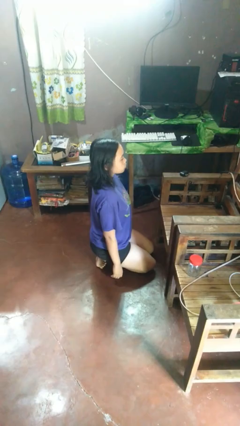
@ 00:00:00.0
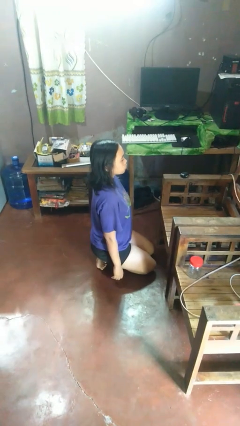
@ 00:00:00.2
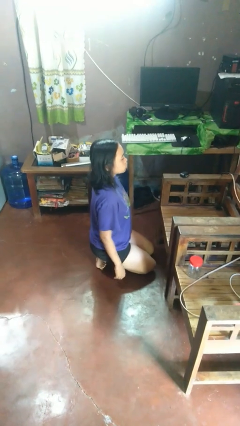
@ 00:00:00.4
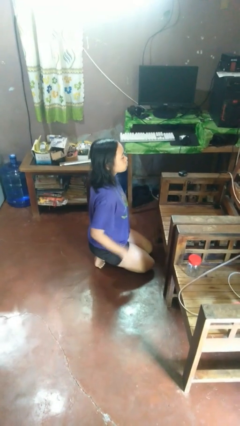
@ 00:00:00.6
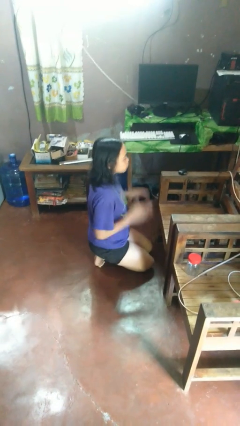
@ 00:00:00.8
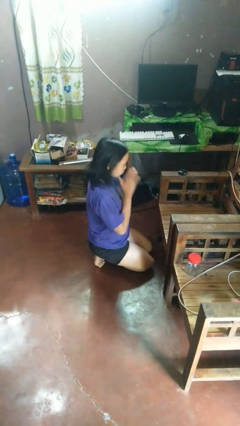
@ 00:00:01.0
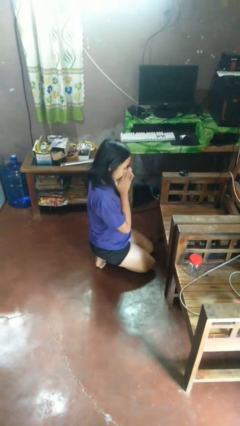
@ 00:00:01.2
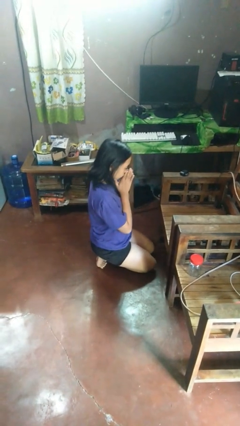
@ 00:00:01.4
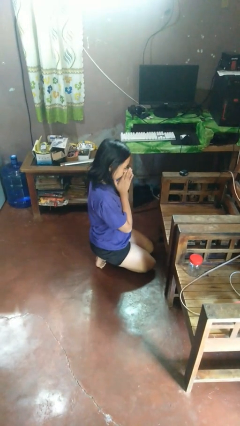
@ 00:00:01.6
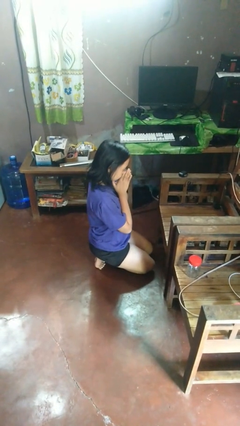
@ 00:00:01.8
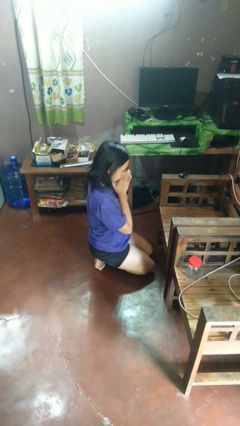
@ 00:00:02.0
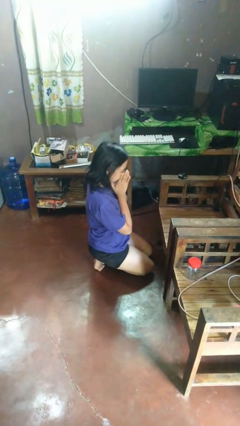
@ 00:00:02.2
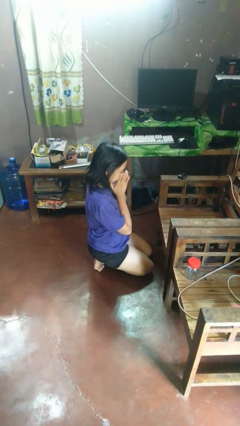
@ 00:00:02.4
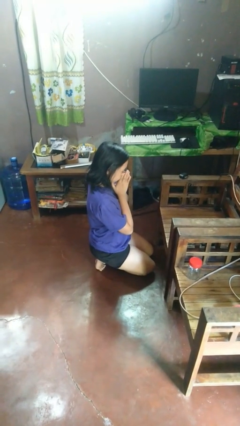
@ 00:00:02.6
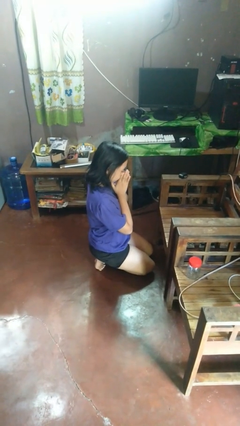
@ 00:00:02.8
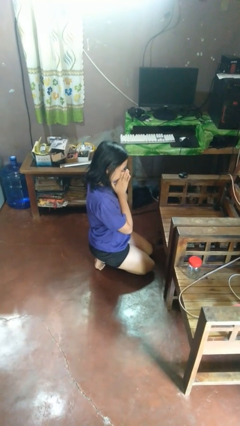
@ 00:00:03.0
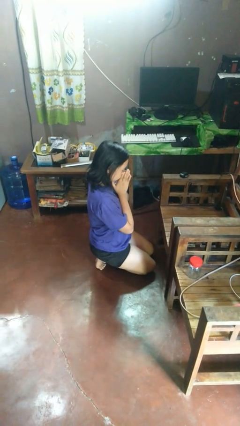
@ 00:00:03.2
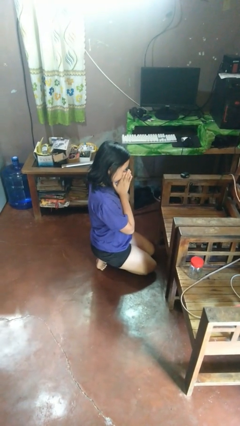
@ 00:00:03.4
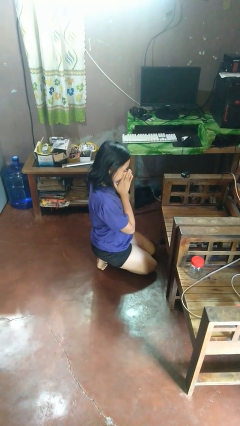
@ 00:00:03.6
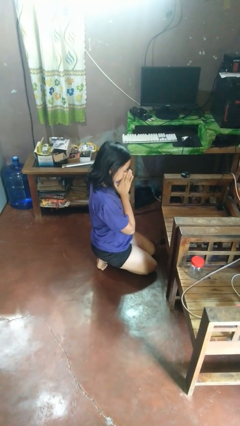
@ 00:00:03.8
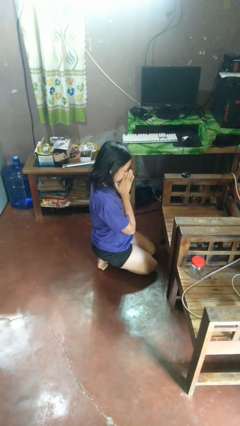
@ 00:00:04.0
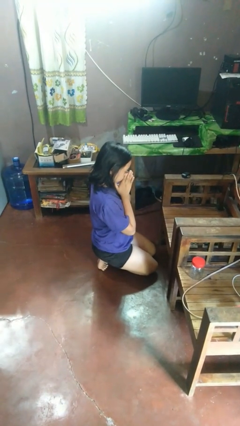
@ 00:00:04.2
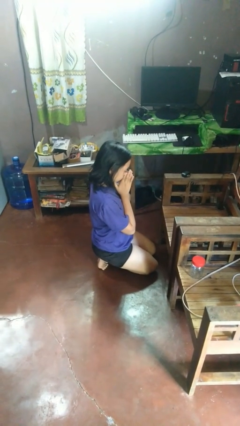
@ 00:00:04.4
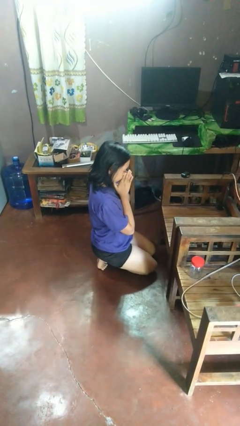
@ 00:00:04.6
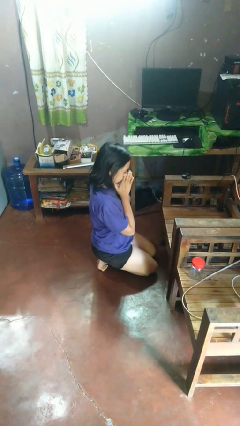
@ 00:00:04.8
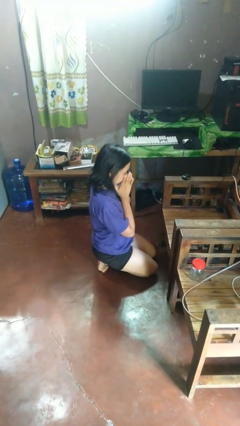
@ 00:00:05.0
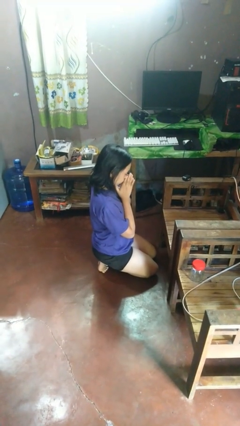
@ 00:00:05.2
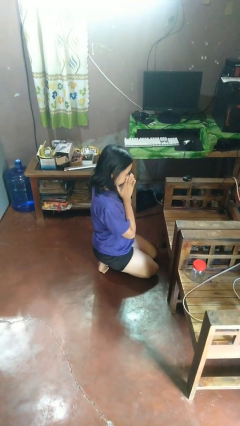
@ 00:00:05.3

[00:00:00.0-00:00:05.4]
person prays

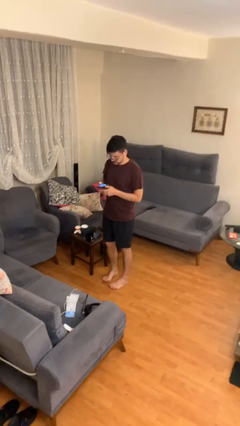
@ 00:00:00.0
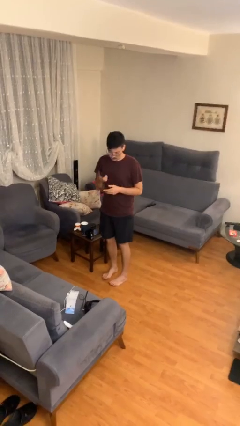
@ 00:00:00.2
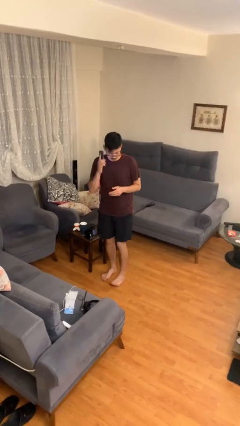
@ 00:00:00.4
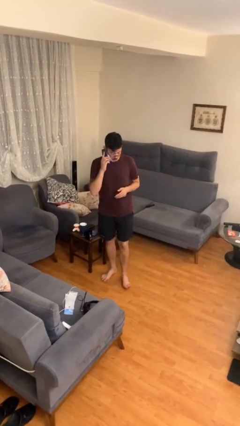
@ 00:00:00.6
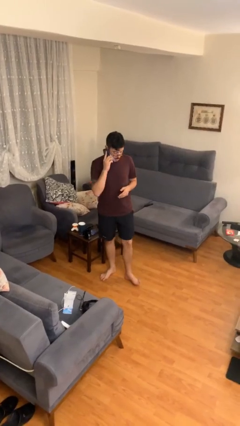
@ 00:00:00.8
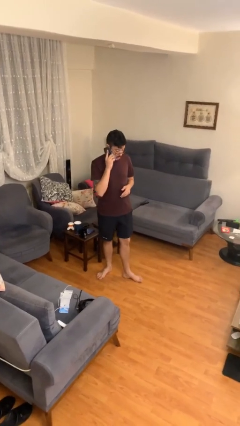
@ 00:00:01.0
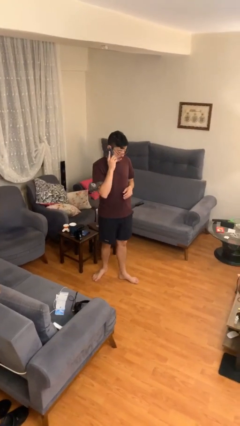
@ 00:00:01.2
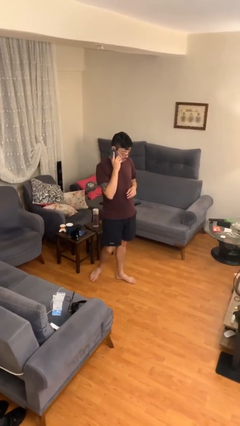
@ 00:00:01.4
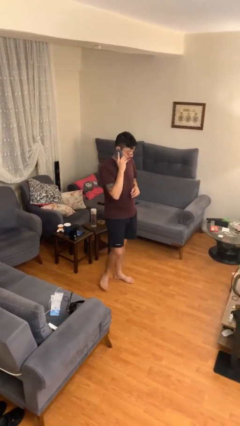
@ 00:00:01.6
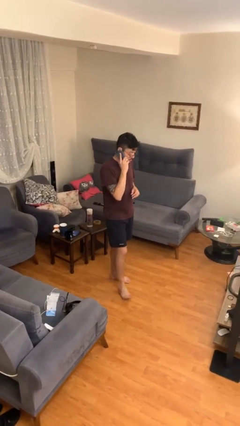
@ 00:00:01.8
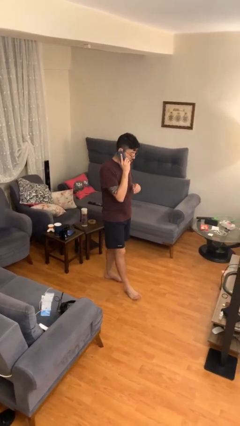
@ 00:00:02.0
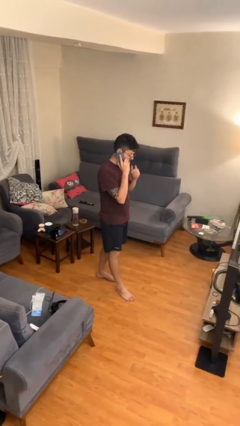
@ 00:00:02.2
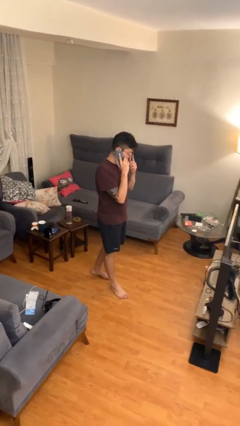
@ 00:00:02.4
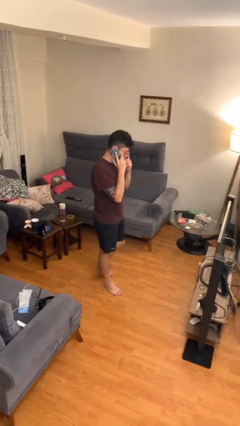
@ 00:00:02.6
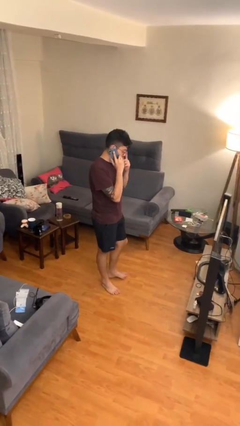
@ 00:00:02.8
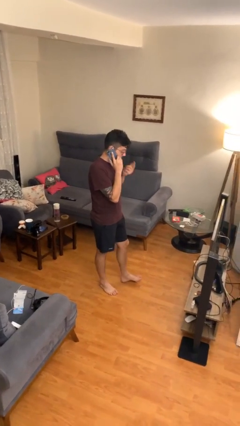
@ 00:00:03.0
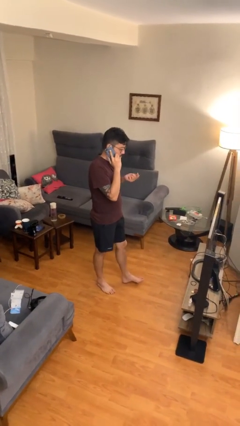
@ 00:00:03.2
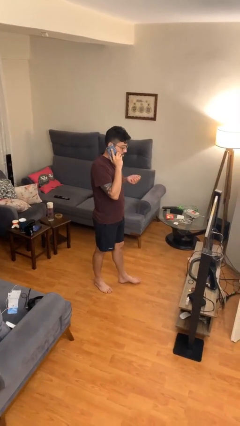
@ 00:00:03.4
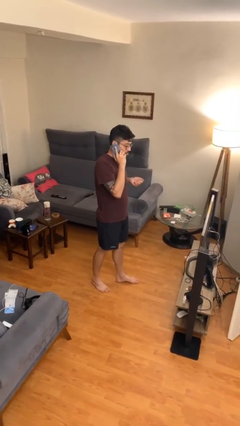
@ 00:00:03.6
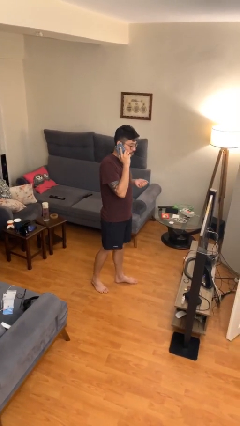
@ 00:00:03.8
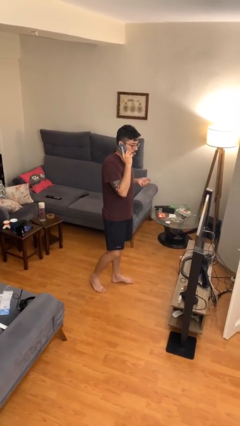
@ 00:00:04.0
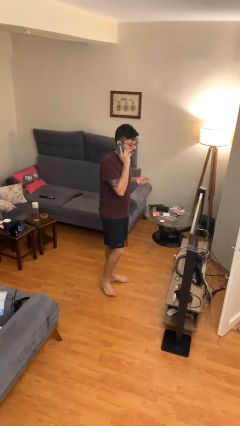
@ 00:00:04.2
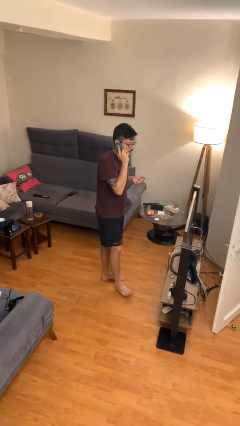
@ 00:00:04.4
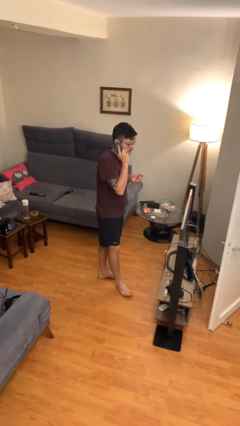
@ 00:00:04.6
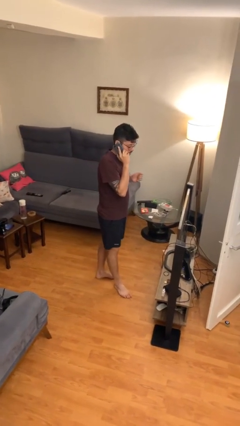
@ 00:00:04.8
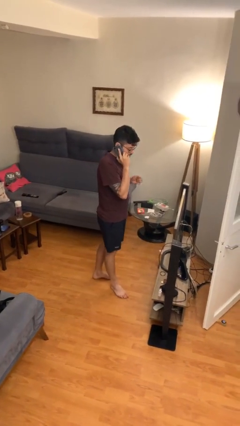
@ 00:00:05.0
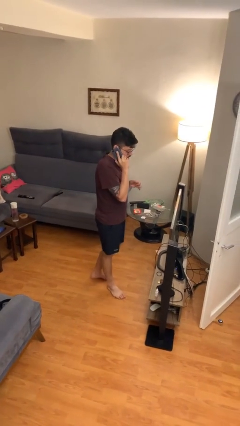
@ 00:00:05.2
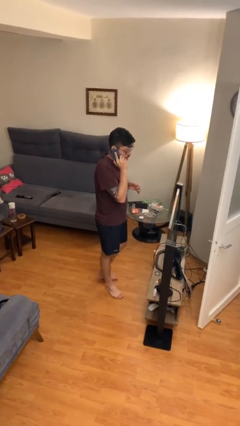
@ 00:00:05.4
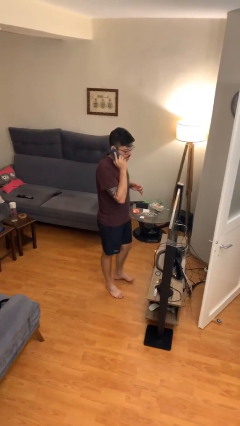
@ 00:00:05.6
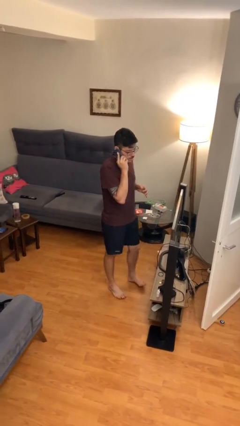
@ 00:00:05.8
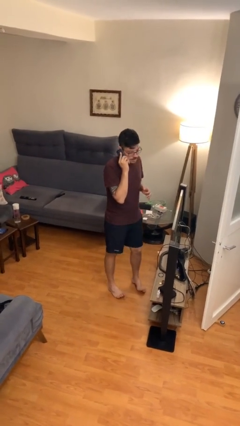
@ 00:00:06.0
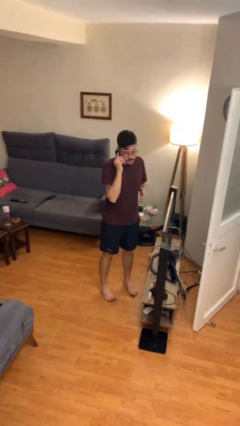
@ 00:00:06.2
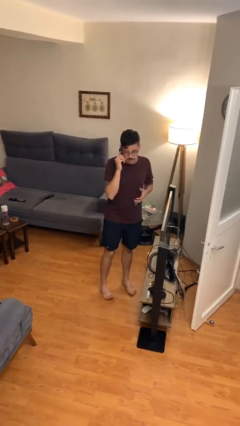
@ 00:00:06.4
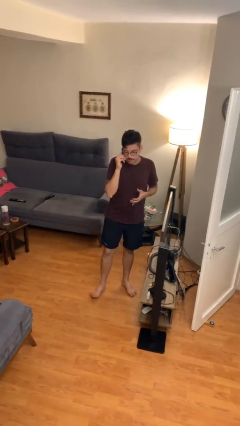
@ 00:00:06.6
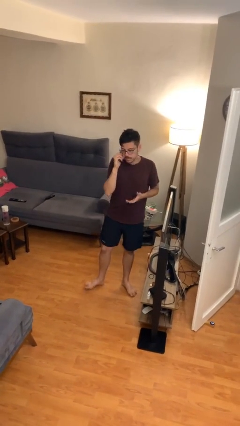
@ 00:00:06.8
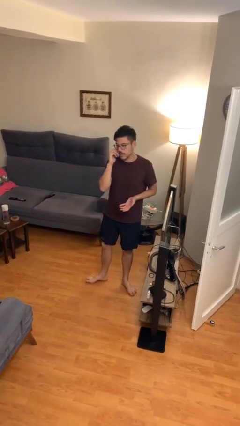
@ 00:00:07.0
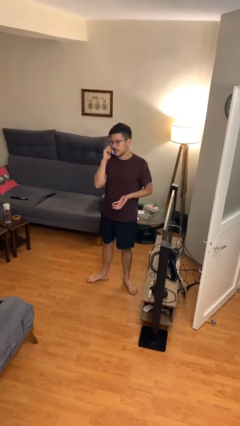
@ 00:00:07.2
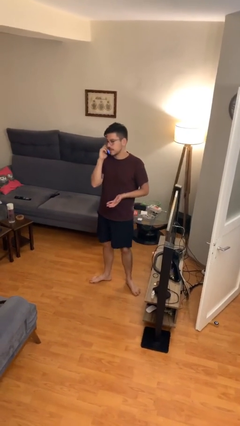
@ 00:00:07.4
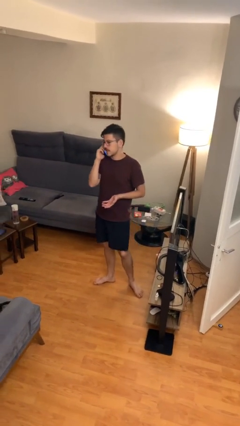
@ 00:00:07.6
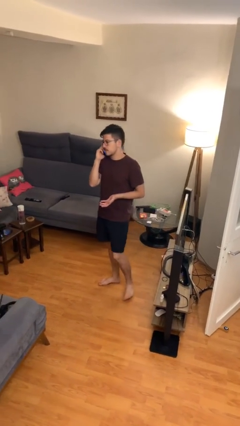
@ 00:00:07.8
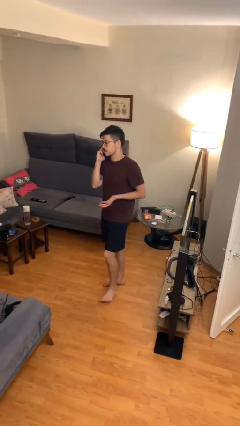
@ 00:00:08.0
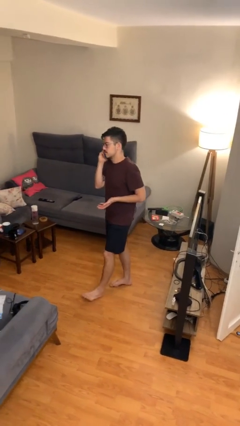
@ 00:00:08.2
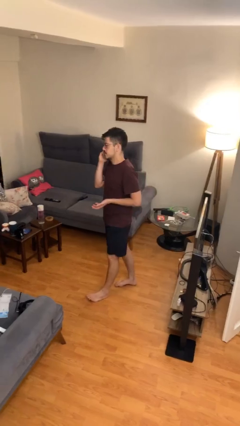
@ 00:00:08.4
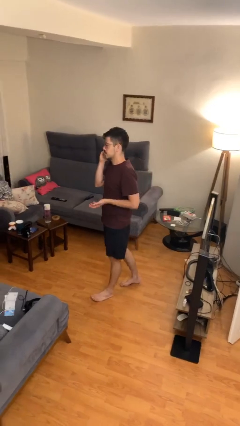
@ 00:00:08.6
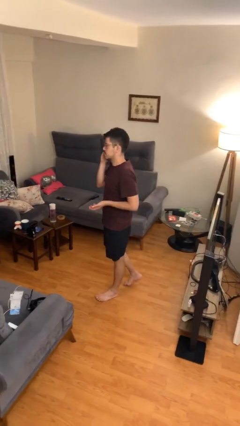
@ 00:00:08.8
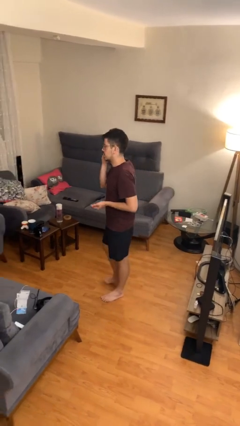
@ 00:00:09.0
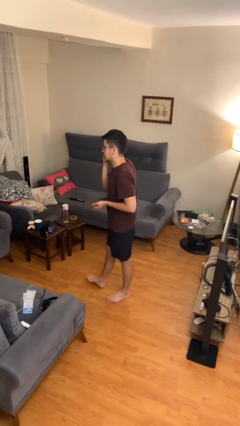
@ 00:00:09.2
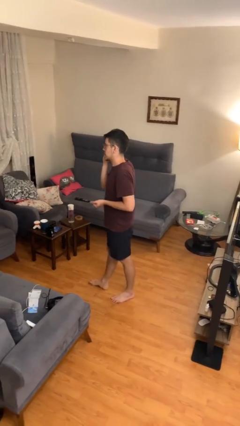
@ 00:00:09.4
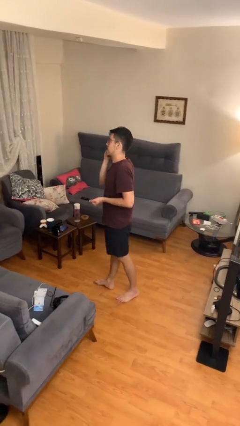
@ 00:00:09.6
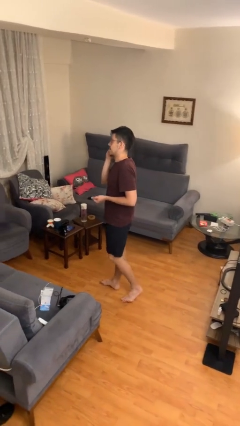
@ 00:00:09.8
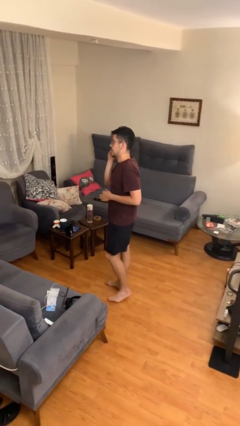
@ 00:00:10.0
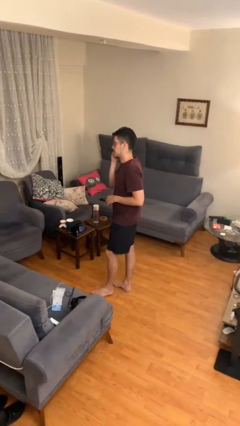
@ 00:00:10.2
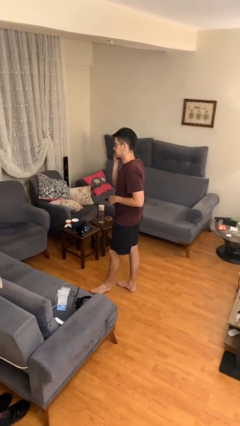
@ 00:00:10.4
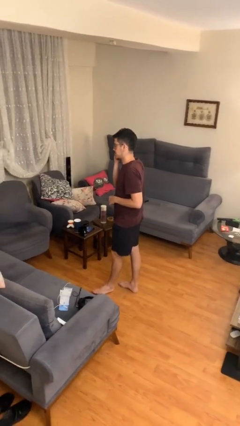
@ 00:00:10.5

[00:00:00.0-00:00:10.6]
person talks on phone

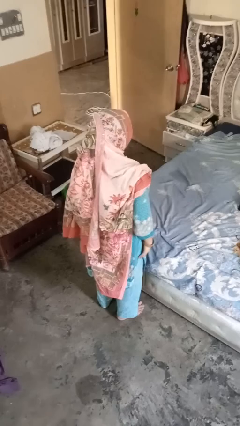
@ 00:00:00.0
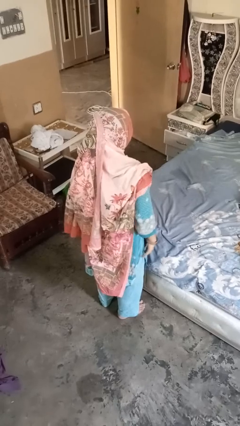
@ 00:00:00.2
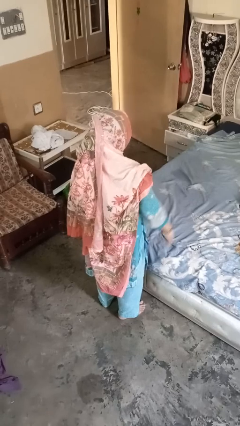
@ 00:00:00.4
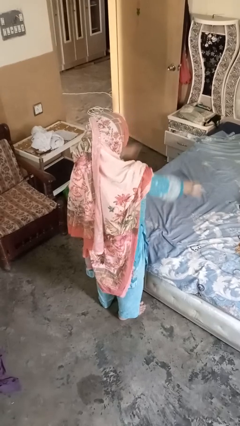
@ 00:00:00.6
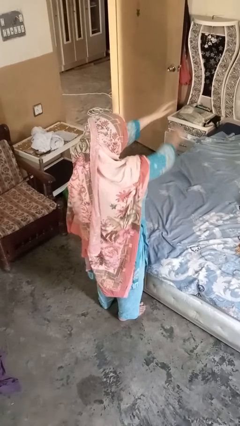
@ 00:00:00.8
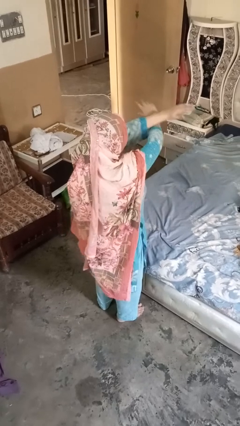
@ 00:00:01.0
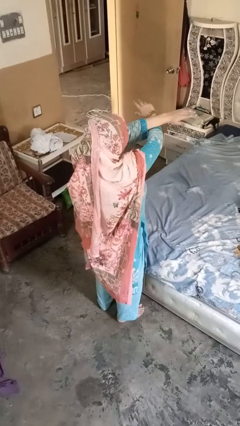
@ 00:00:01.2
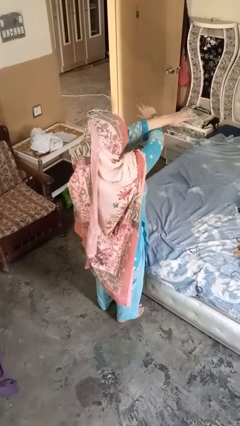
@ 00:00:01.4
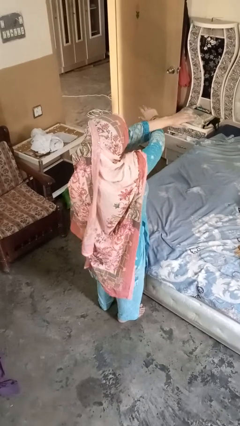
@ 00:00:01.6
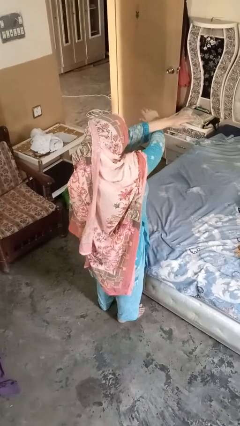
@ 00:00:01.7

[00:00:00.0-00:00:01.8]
person gestures arms x

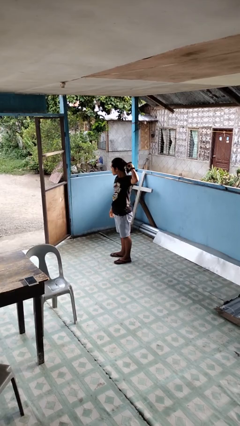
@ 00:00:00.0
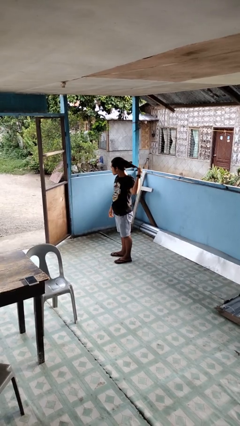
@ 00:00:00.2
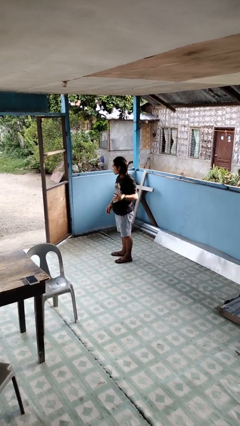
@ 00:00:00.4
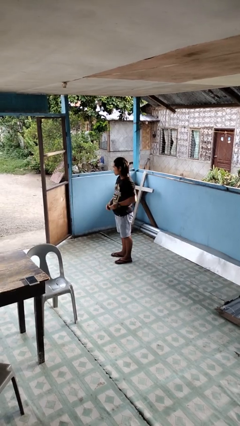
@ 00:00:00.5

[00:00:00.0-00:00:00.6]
person takes off hairtie
